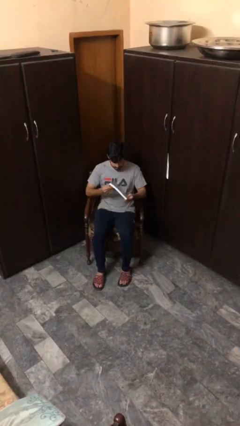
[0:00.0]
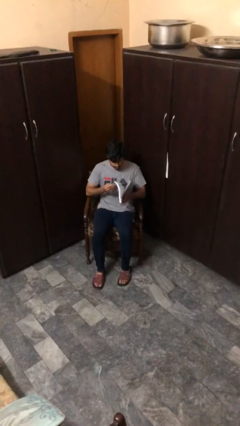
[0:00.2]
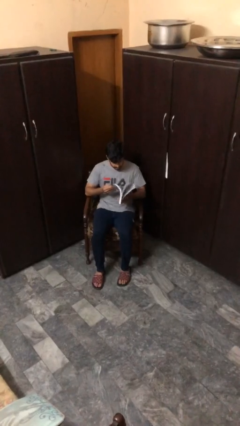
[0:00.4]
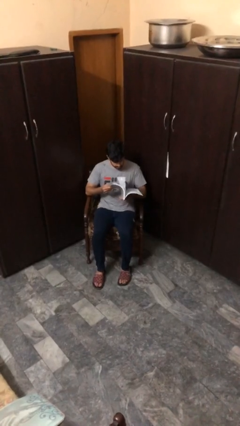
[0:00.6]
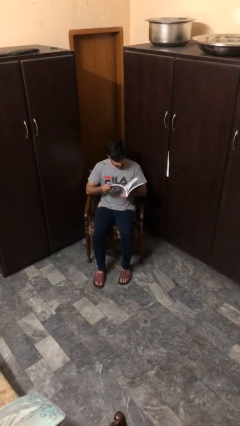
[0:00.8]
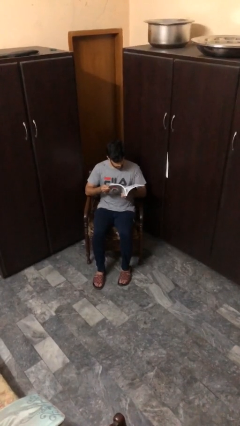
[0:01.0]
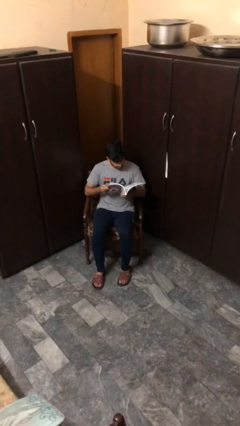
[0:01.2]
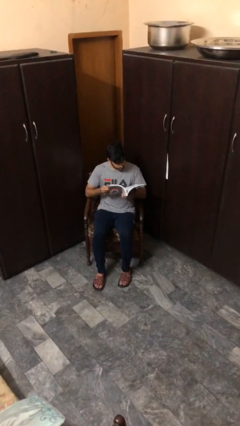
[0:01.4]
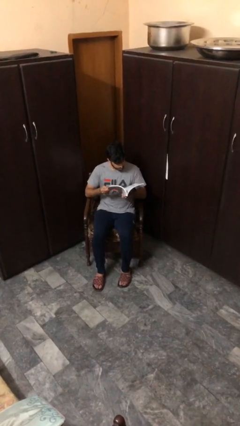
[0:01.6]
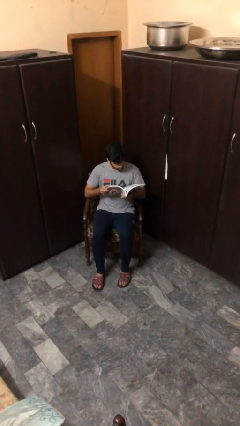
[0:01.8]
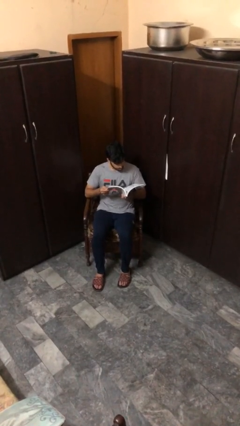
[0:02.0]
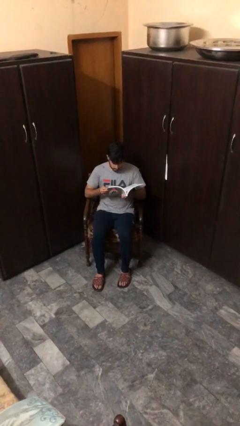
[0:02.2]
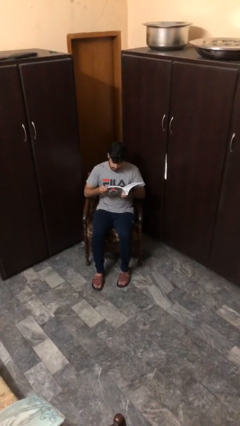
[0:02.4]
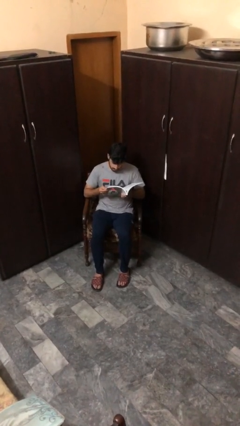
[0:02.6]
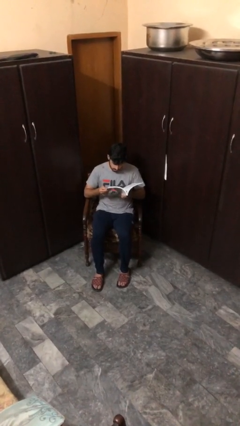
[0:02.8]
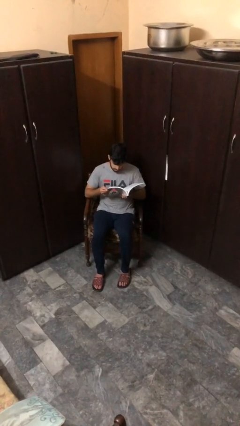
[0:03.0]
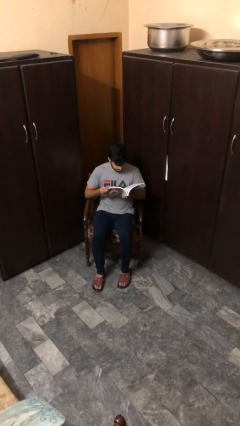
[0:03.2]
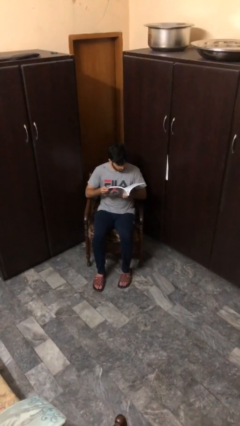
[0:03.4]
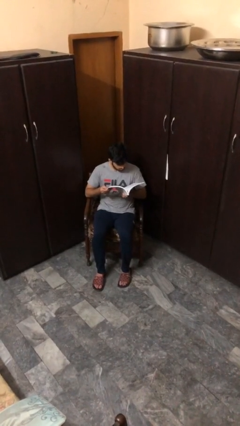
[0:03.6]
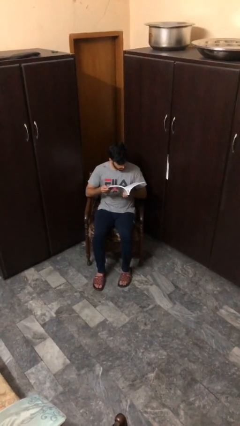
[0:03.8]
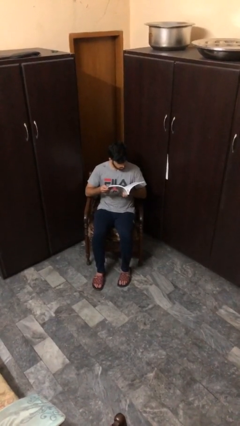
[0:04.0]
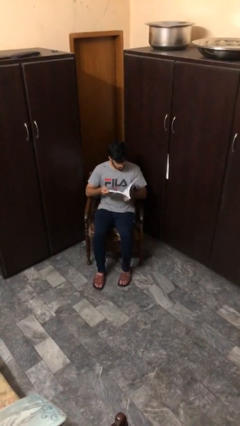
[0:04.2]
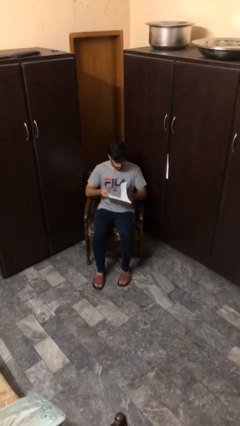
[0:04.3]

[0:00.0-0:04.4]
person reads book

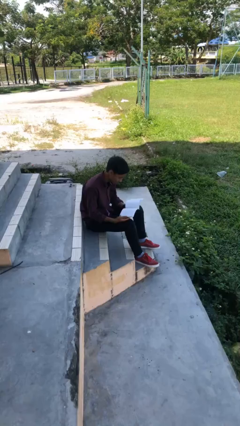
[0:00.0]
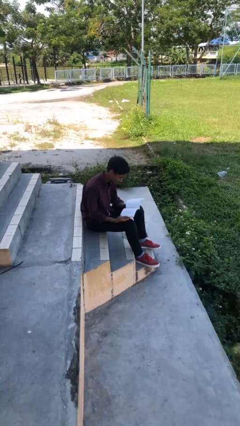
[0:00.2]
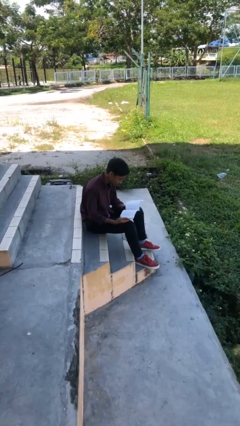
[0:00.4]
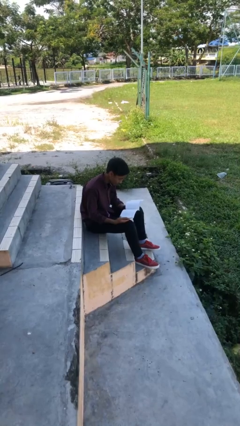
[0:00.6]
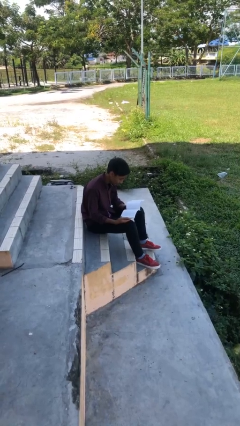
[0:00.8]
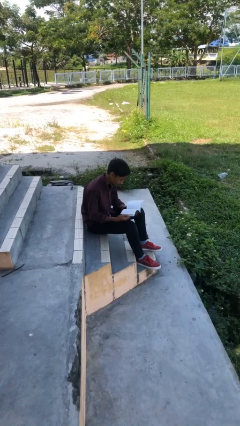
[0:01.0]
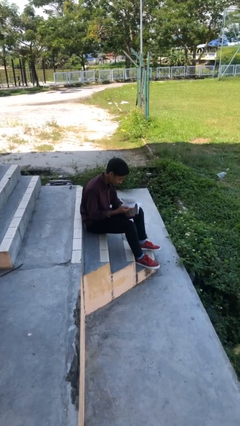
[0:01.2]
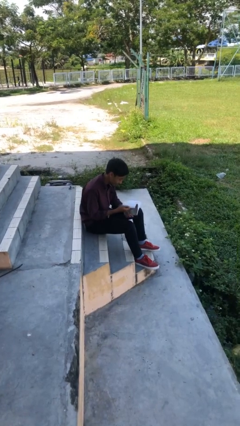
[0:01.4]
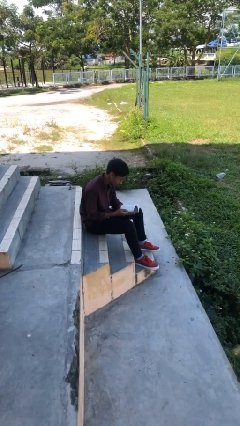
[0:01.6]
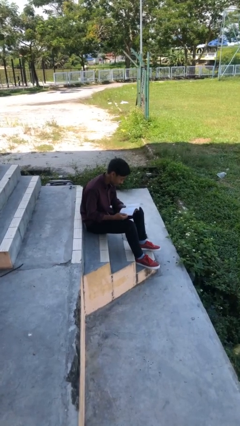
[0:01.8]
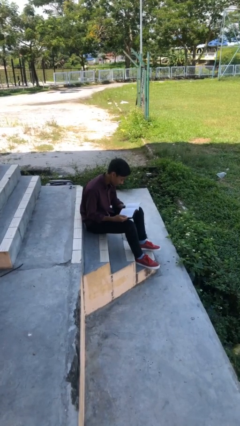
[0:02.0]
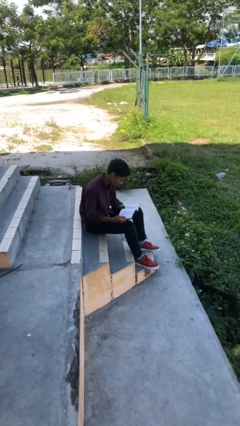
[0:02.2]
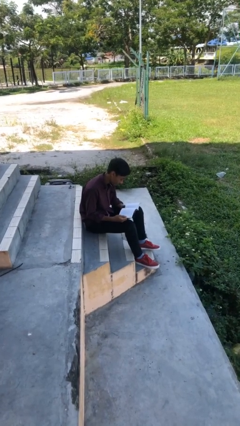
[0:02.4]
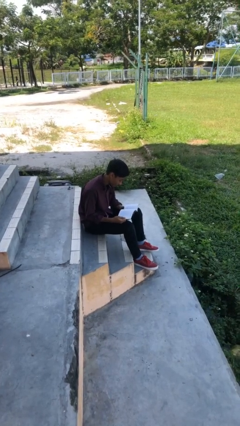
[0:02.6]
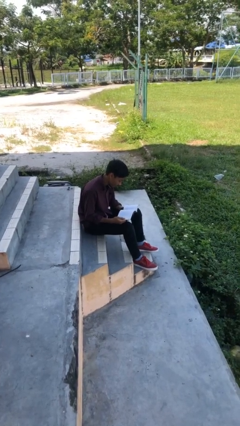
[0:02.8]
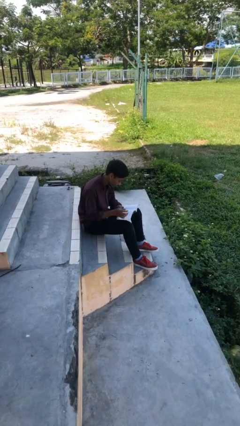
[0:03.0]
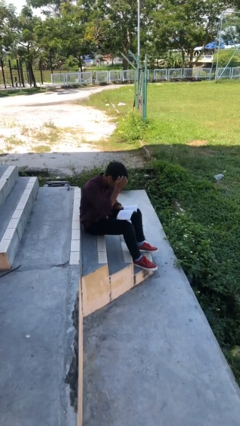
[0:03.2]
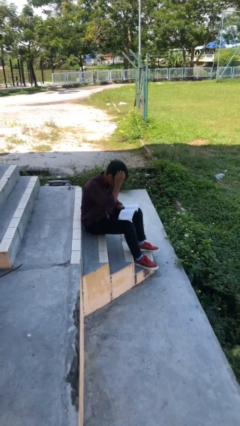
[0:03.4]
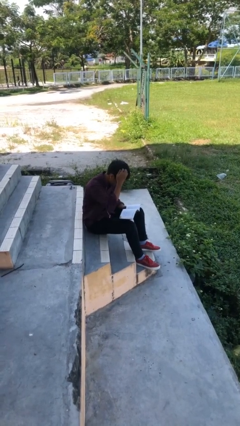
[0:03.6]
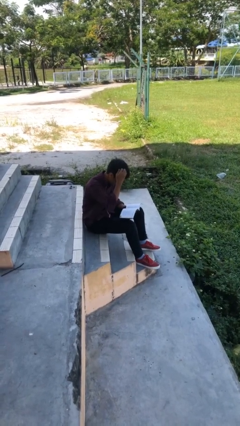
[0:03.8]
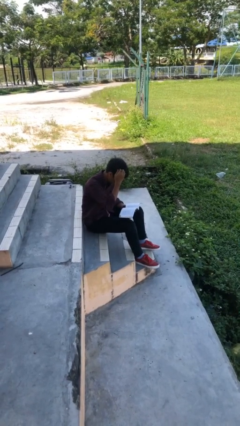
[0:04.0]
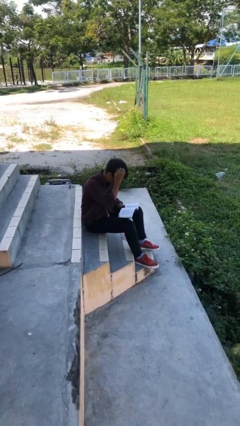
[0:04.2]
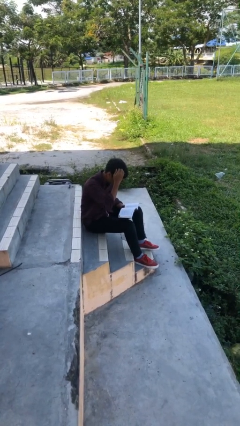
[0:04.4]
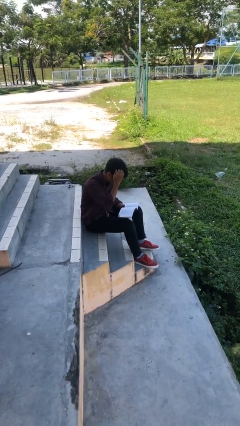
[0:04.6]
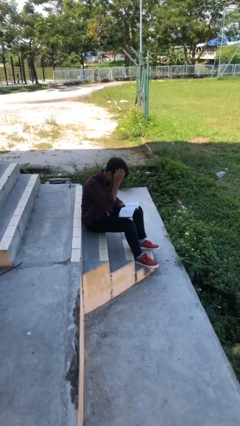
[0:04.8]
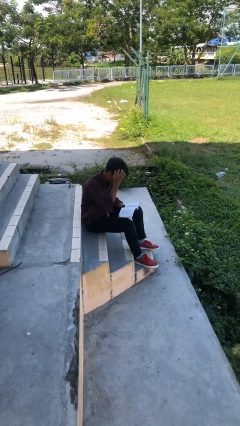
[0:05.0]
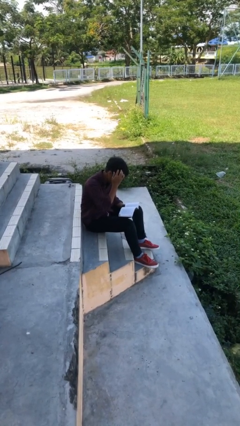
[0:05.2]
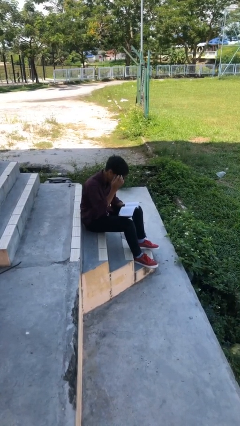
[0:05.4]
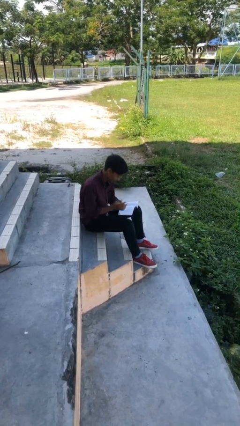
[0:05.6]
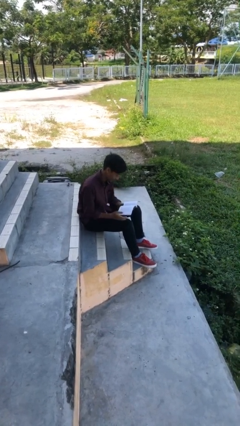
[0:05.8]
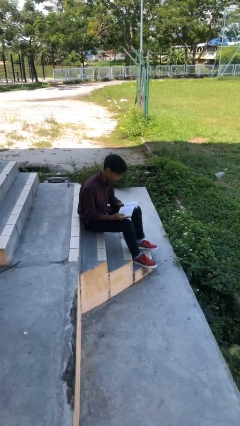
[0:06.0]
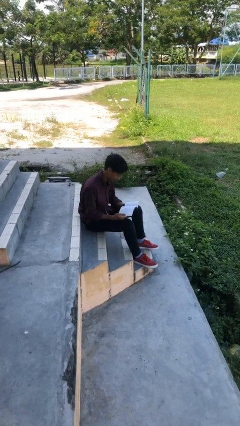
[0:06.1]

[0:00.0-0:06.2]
person reads document

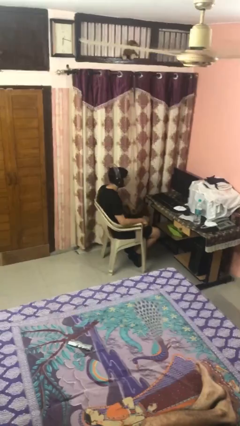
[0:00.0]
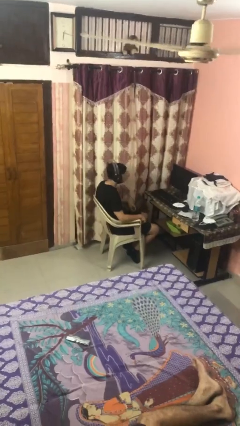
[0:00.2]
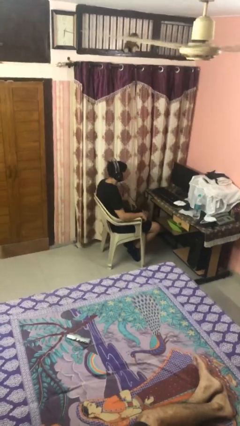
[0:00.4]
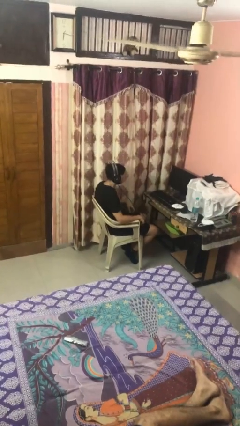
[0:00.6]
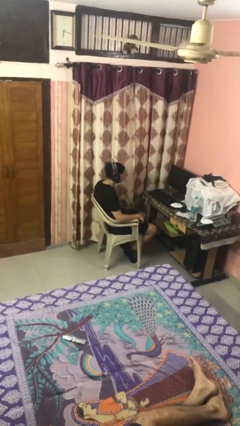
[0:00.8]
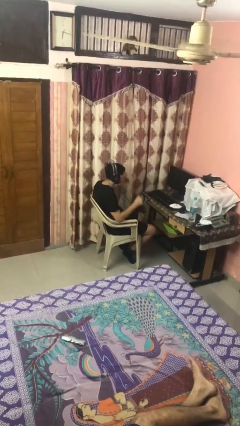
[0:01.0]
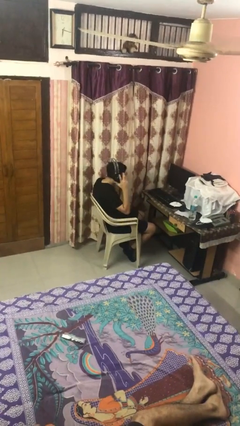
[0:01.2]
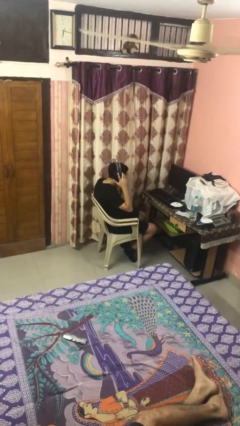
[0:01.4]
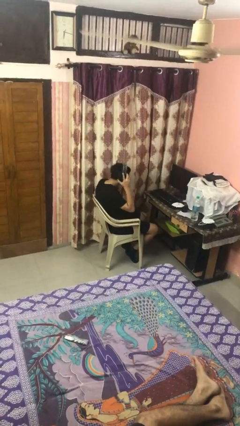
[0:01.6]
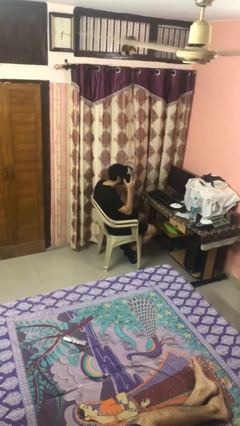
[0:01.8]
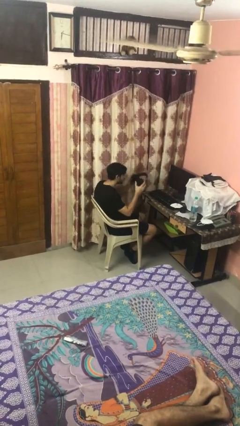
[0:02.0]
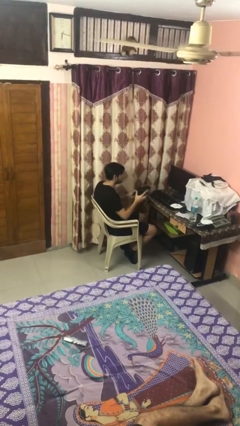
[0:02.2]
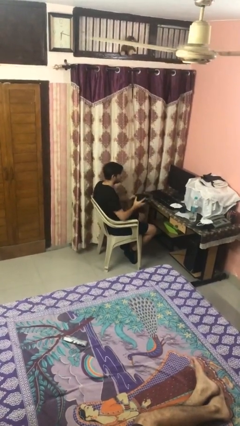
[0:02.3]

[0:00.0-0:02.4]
person takes off headphones

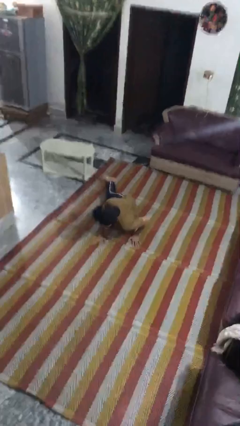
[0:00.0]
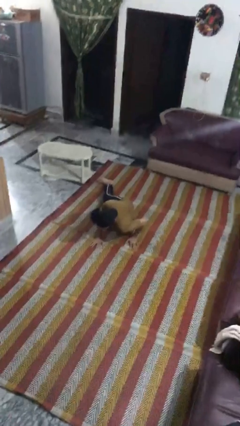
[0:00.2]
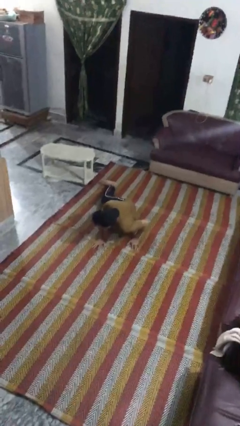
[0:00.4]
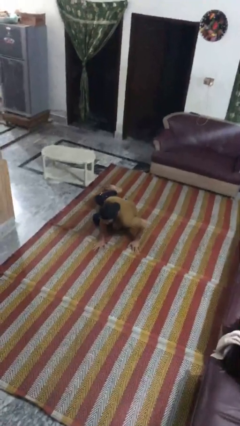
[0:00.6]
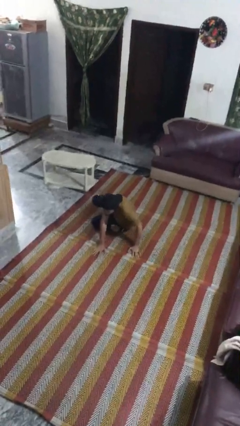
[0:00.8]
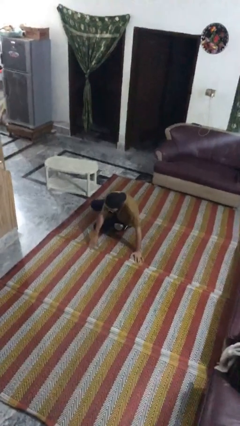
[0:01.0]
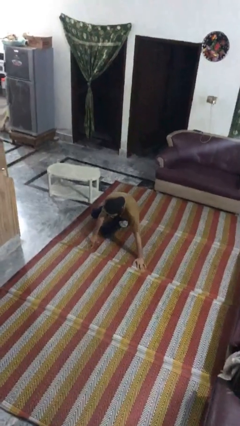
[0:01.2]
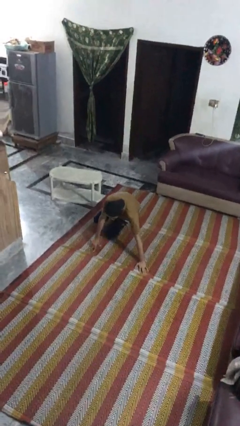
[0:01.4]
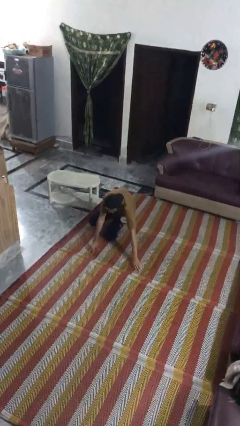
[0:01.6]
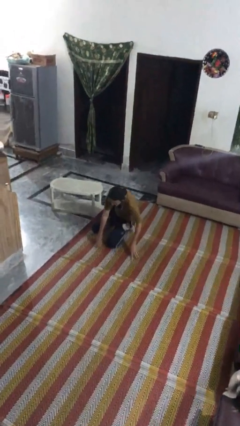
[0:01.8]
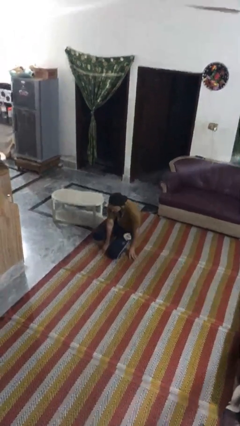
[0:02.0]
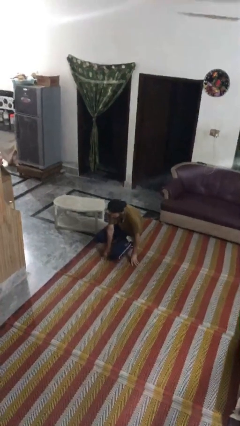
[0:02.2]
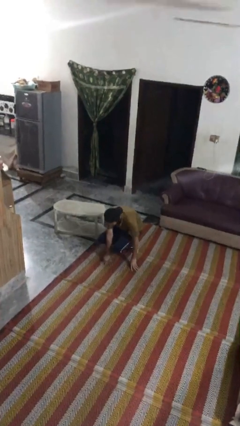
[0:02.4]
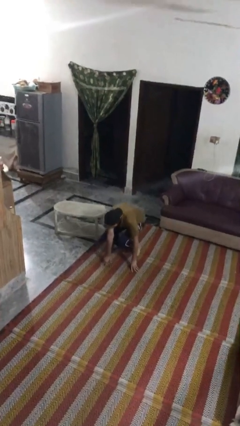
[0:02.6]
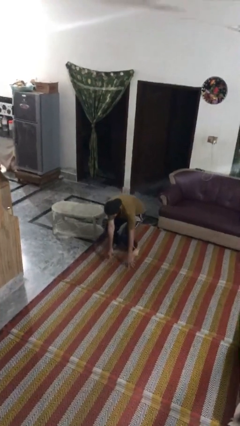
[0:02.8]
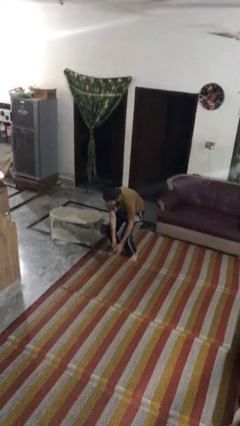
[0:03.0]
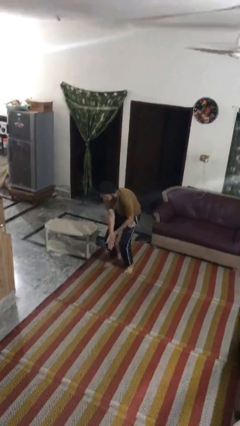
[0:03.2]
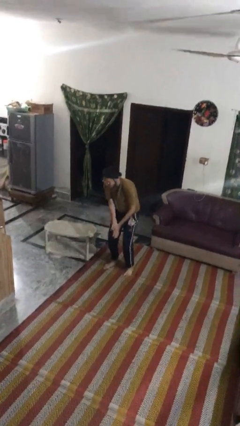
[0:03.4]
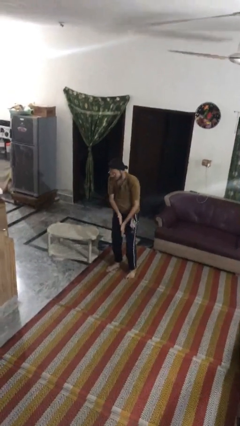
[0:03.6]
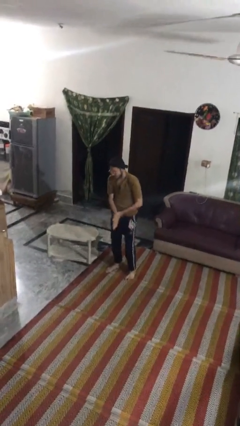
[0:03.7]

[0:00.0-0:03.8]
person stands up from floor

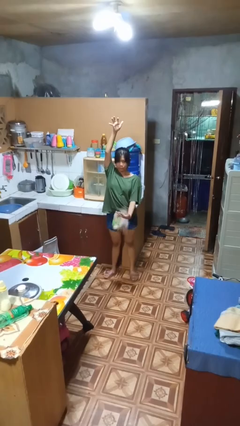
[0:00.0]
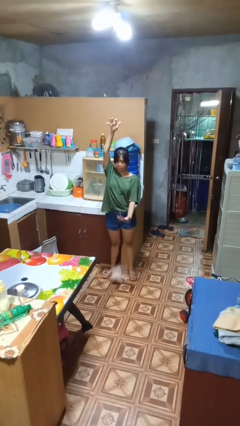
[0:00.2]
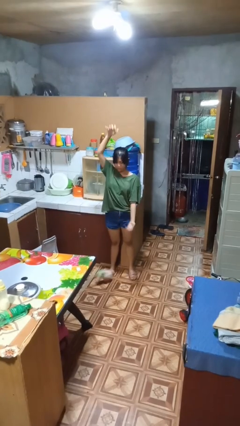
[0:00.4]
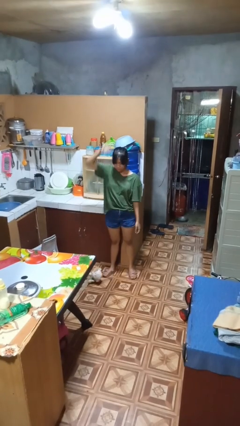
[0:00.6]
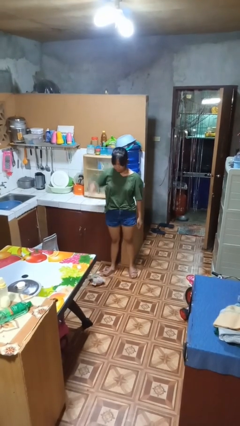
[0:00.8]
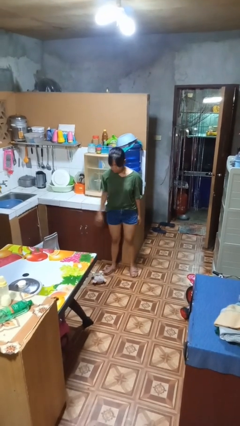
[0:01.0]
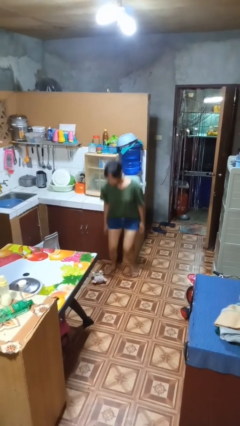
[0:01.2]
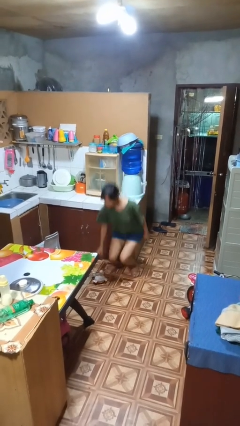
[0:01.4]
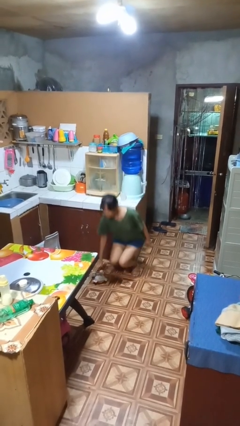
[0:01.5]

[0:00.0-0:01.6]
person catches dropped object
